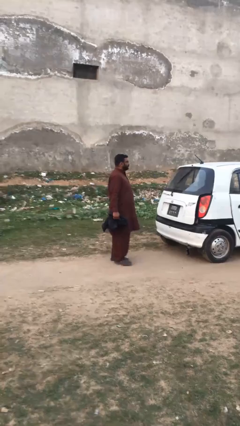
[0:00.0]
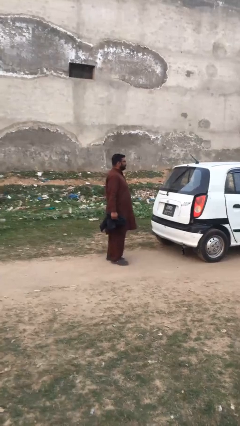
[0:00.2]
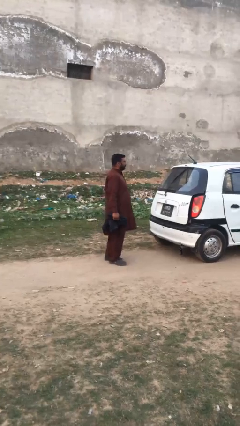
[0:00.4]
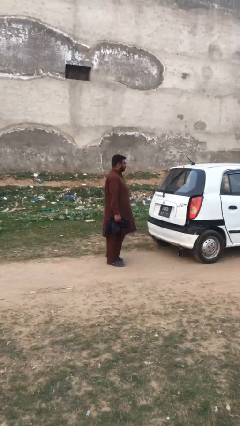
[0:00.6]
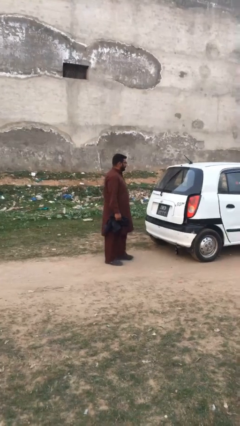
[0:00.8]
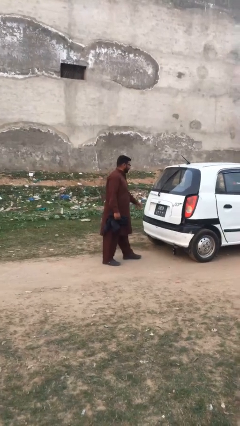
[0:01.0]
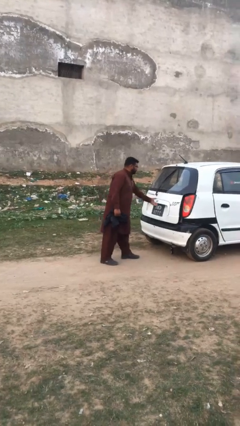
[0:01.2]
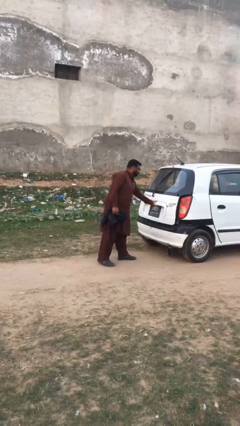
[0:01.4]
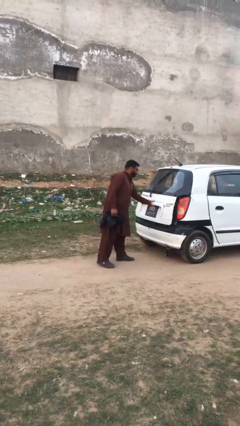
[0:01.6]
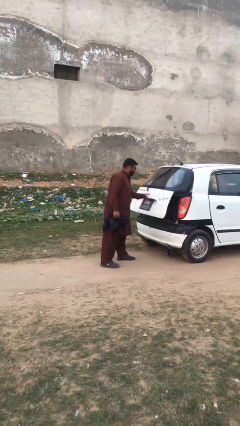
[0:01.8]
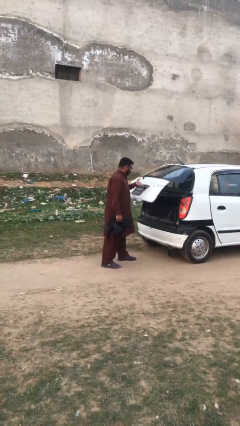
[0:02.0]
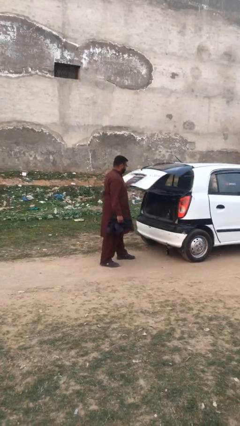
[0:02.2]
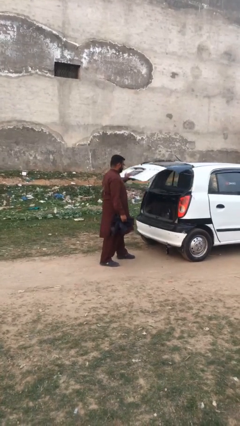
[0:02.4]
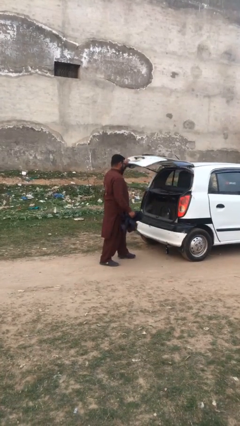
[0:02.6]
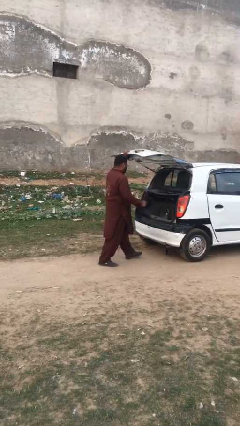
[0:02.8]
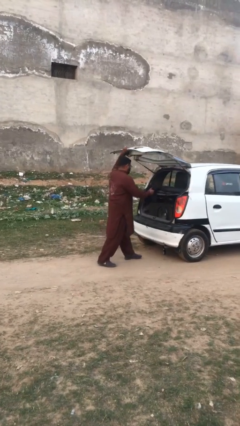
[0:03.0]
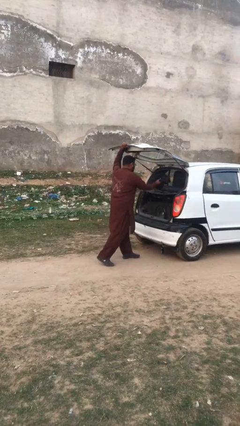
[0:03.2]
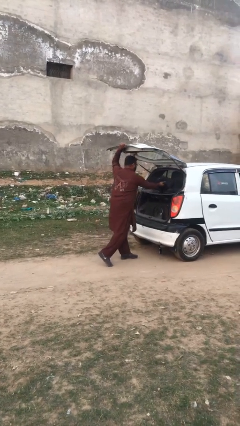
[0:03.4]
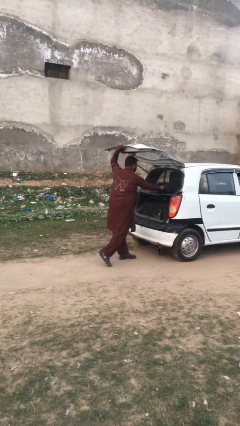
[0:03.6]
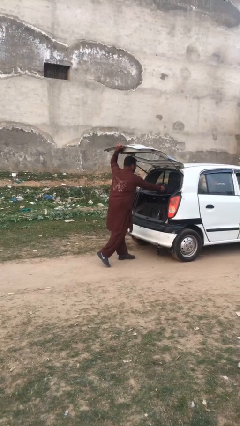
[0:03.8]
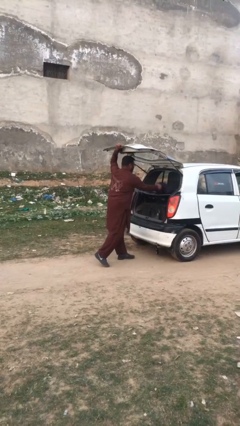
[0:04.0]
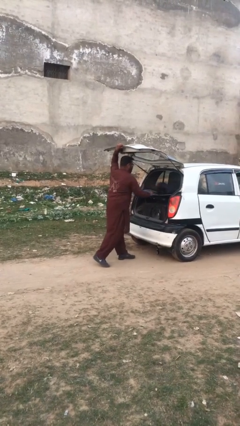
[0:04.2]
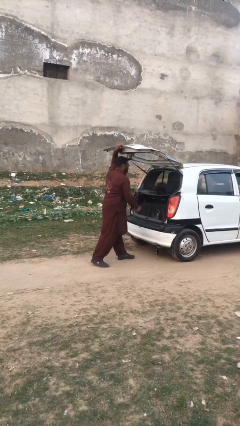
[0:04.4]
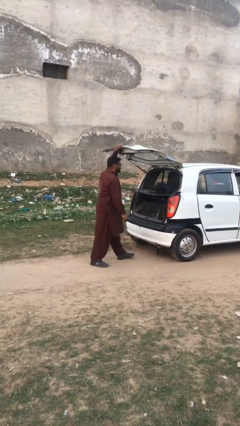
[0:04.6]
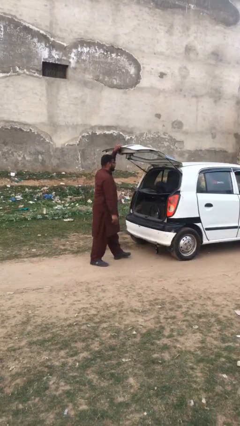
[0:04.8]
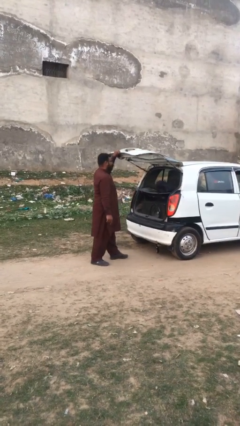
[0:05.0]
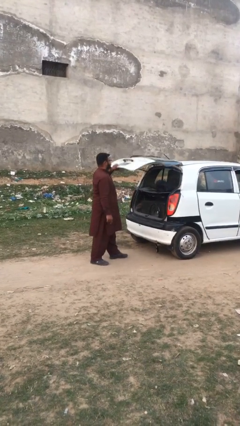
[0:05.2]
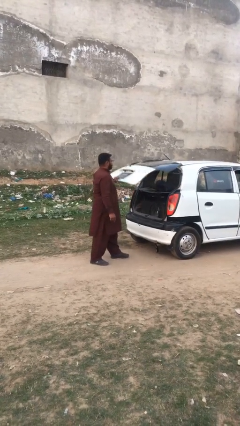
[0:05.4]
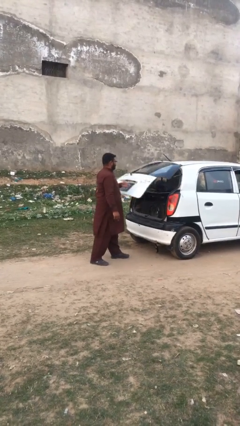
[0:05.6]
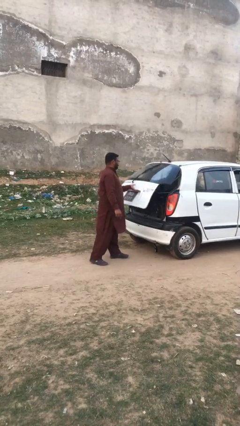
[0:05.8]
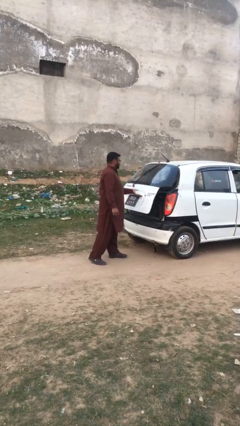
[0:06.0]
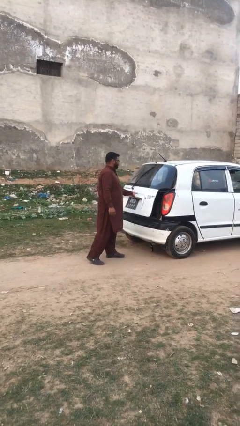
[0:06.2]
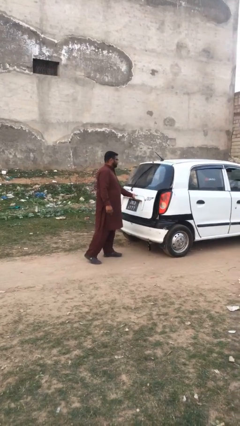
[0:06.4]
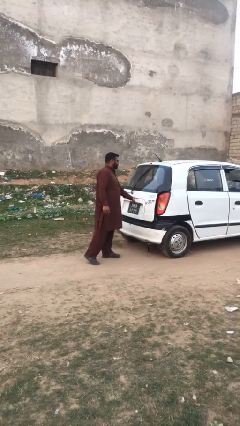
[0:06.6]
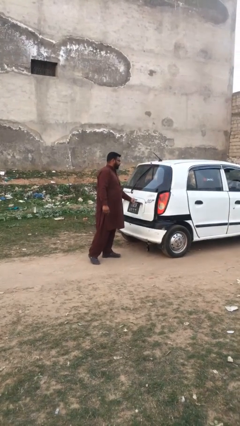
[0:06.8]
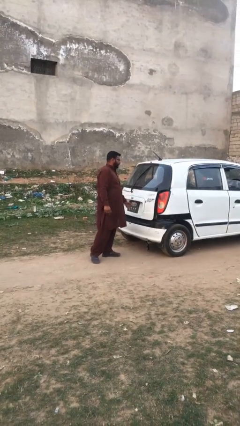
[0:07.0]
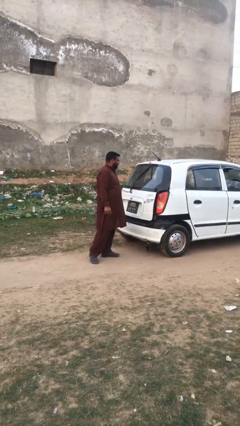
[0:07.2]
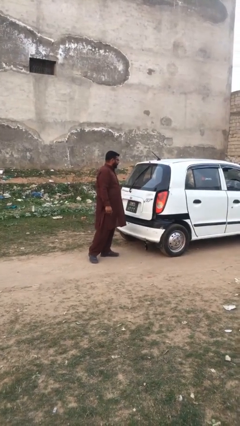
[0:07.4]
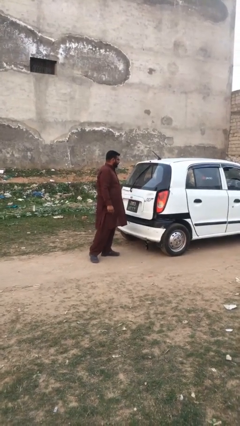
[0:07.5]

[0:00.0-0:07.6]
person loads car

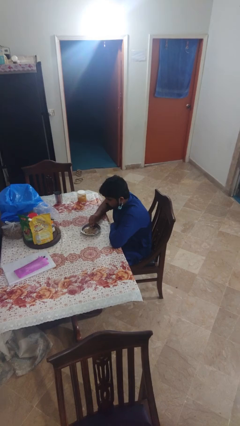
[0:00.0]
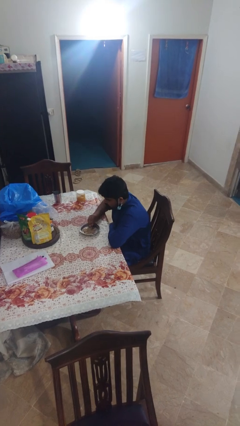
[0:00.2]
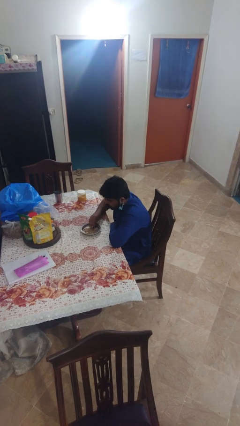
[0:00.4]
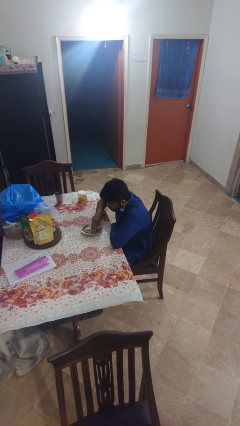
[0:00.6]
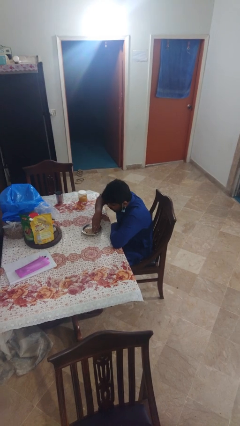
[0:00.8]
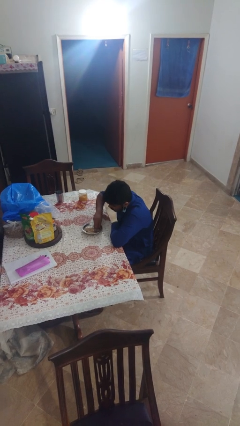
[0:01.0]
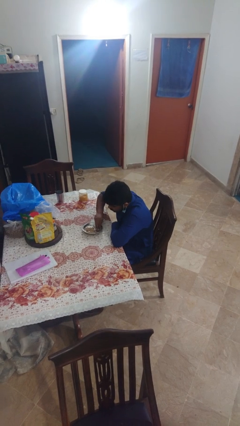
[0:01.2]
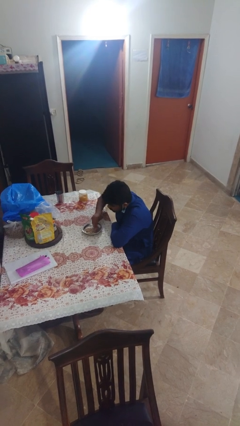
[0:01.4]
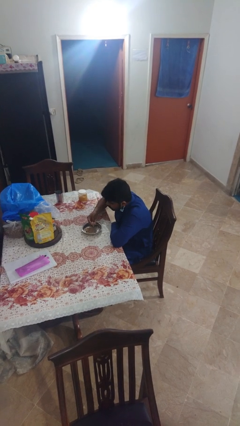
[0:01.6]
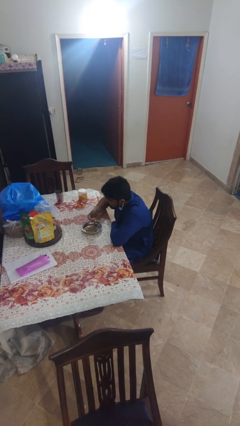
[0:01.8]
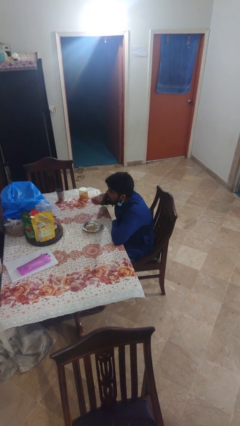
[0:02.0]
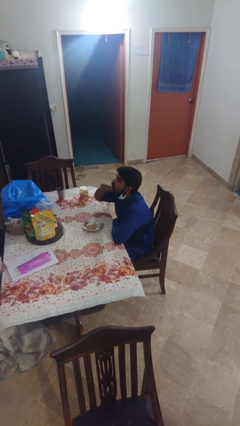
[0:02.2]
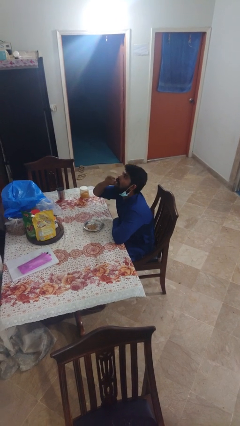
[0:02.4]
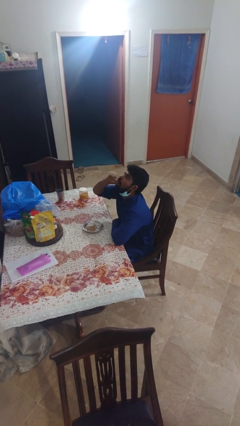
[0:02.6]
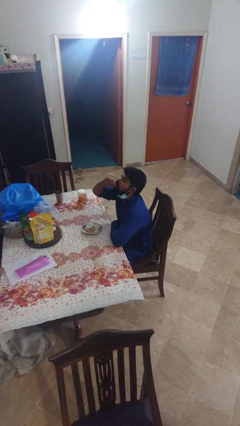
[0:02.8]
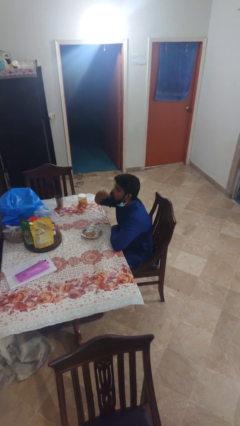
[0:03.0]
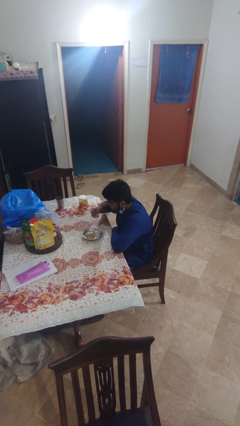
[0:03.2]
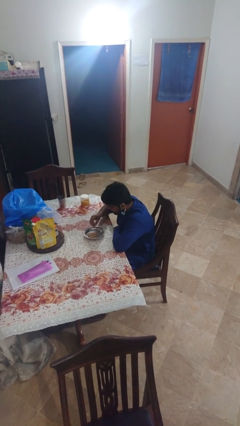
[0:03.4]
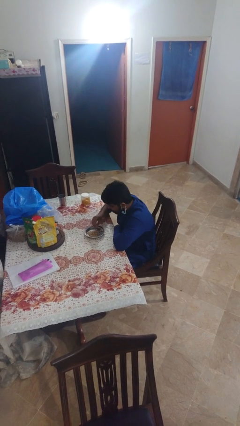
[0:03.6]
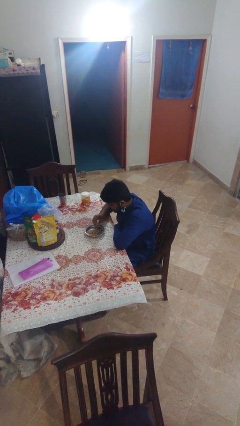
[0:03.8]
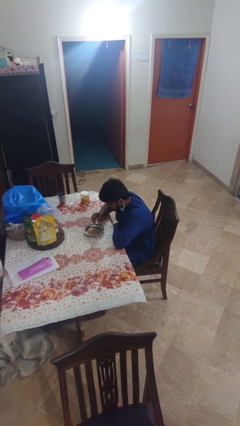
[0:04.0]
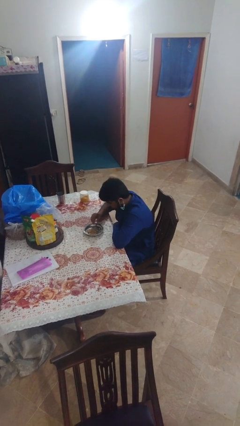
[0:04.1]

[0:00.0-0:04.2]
person eats with hands

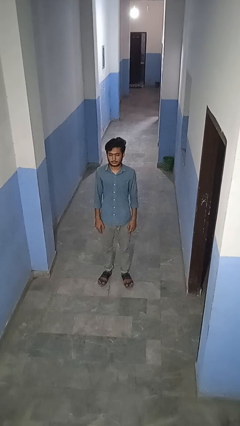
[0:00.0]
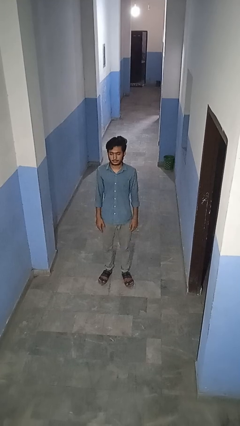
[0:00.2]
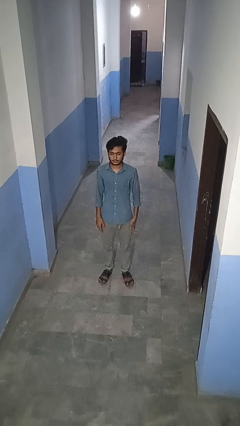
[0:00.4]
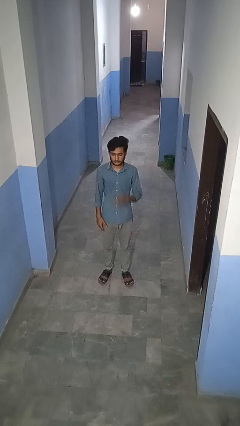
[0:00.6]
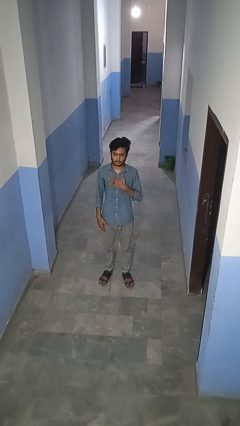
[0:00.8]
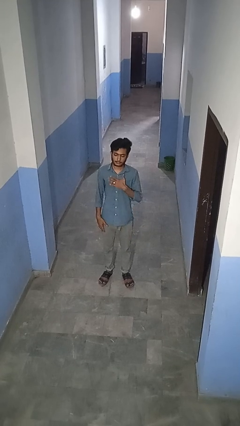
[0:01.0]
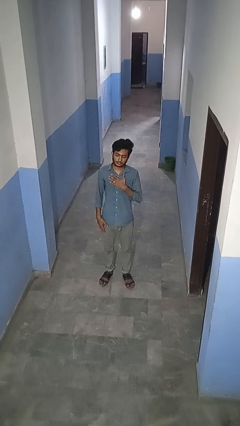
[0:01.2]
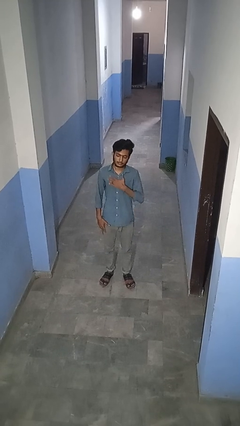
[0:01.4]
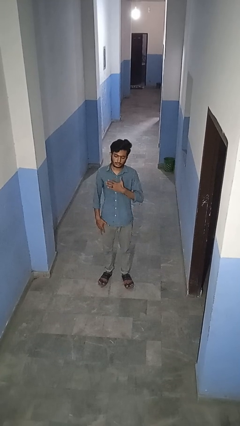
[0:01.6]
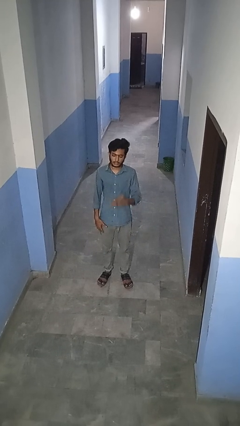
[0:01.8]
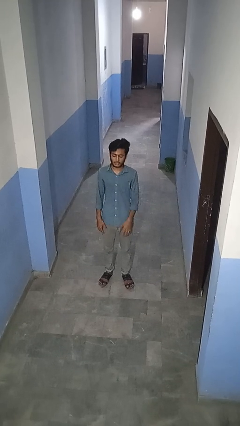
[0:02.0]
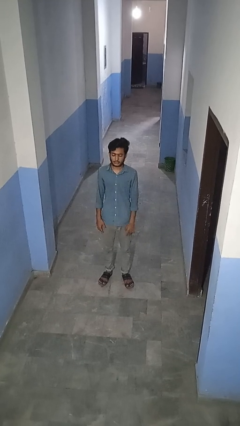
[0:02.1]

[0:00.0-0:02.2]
person drums on chest

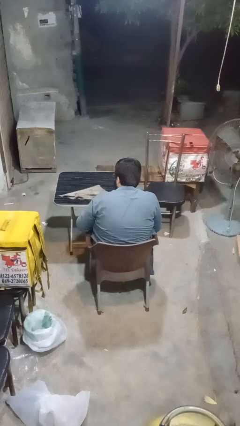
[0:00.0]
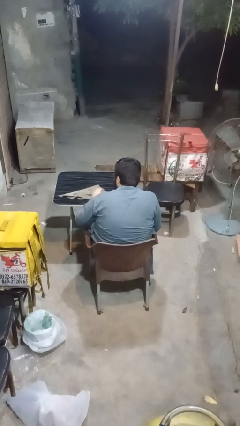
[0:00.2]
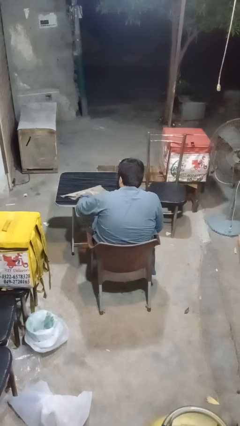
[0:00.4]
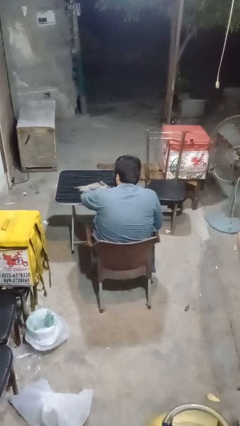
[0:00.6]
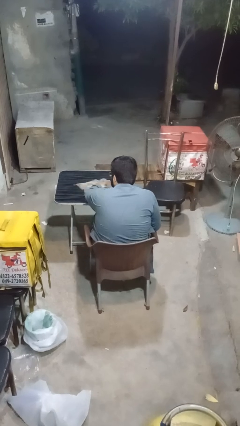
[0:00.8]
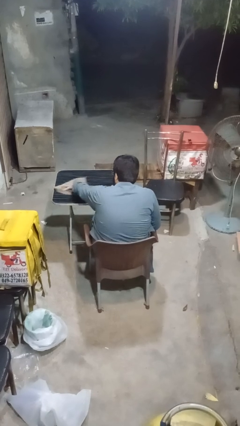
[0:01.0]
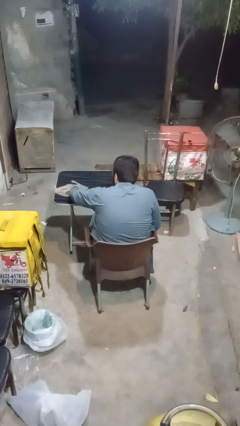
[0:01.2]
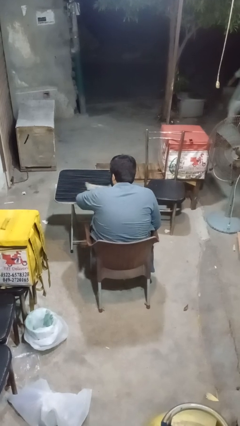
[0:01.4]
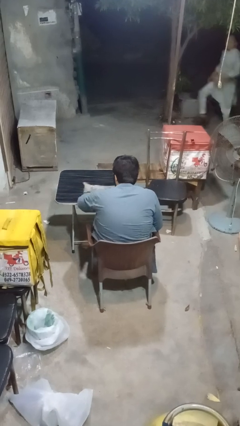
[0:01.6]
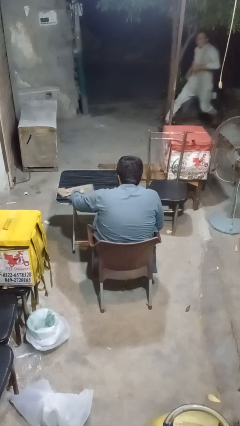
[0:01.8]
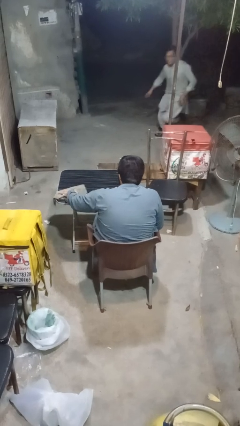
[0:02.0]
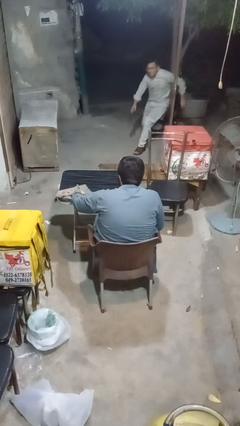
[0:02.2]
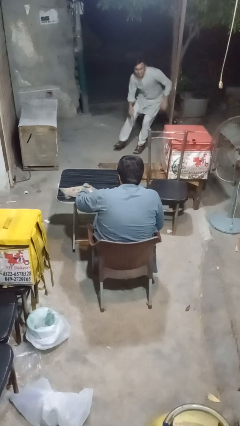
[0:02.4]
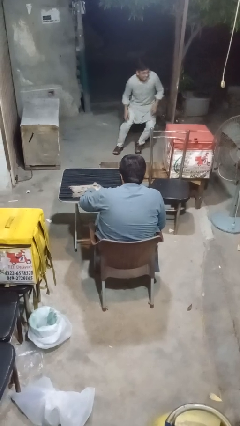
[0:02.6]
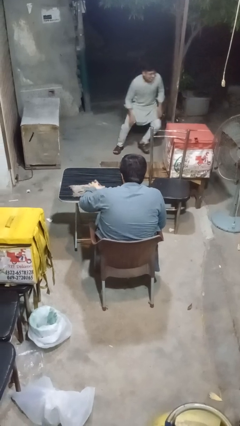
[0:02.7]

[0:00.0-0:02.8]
person cleans table with rag

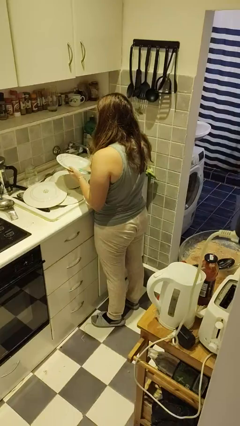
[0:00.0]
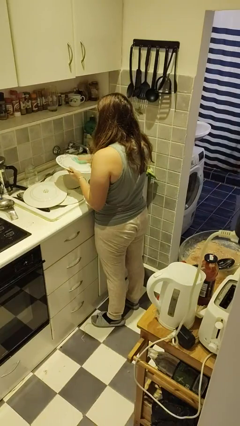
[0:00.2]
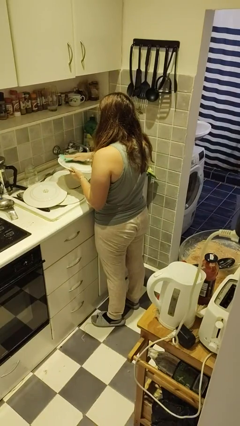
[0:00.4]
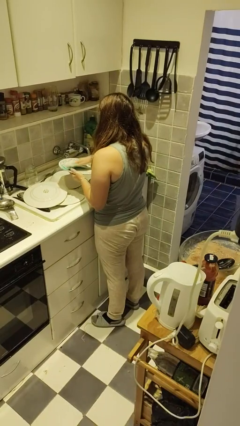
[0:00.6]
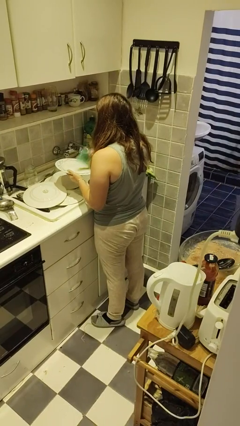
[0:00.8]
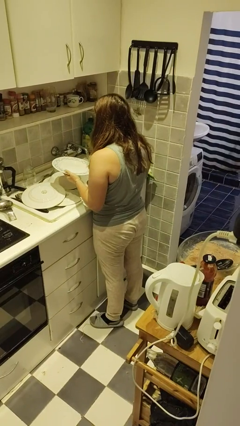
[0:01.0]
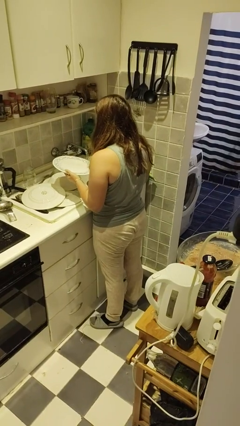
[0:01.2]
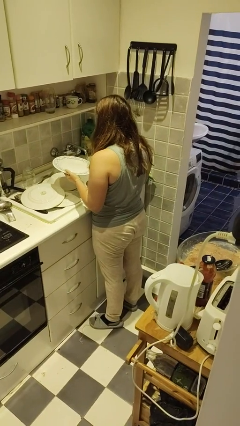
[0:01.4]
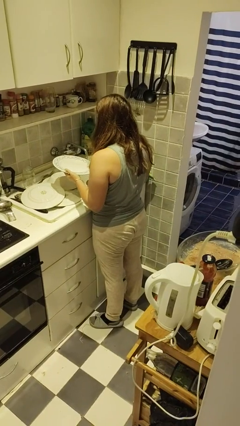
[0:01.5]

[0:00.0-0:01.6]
person dries dish
